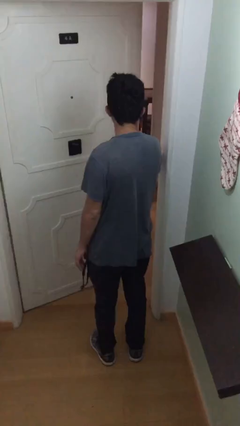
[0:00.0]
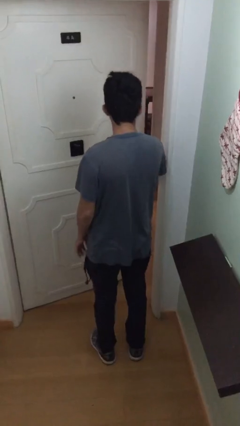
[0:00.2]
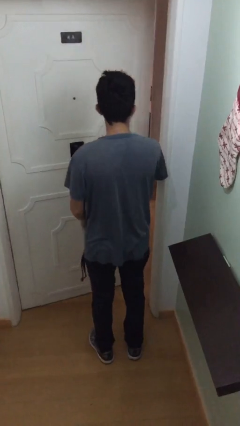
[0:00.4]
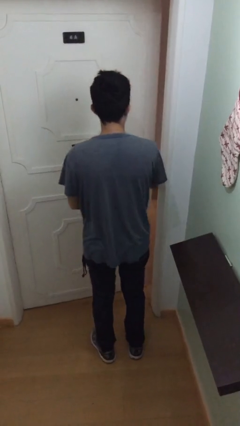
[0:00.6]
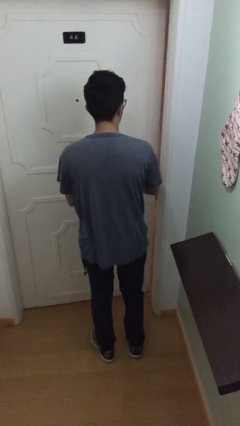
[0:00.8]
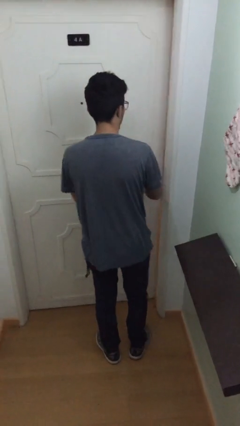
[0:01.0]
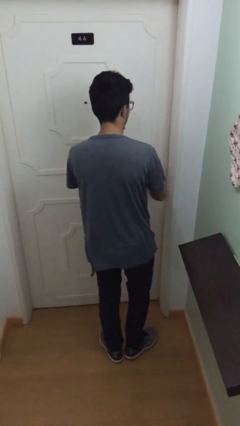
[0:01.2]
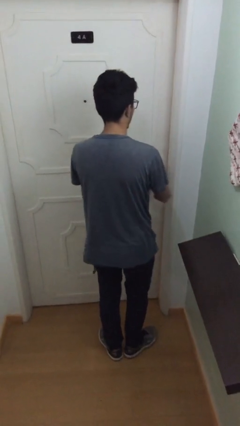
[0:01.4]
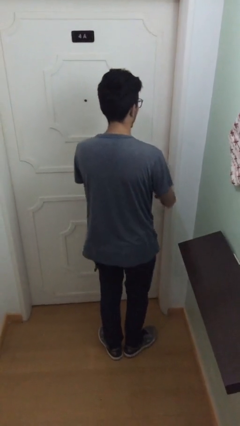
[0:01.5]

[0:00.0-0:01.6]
person closes facility door

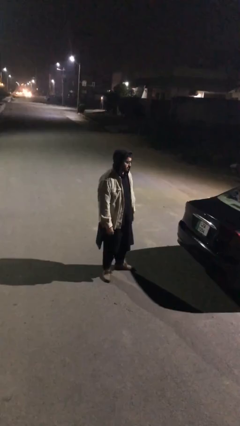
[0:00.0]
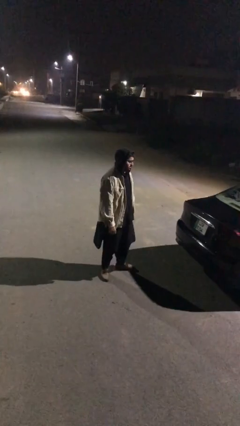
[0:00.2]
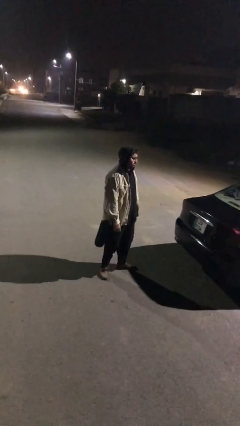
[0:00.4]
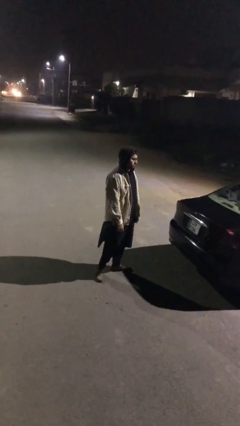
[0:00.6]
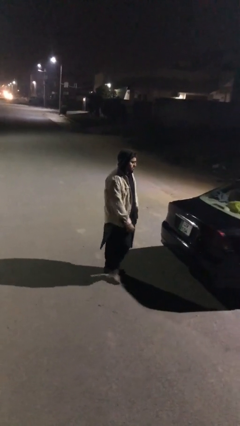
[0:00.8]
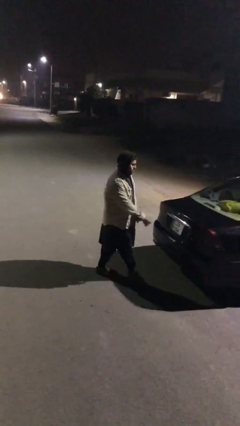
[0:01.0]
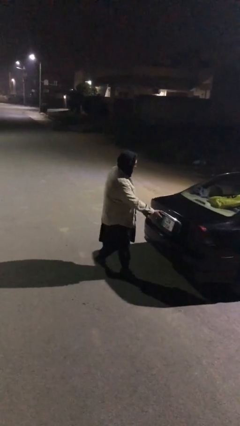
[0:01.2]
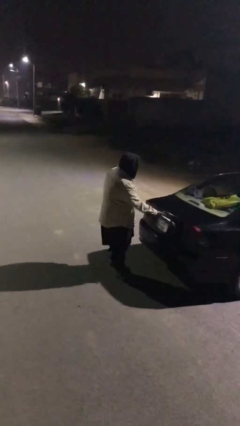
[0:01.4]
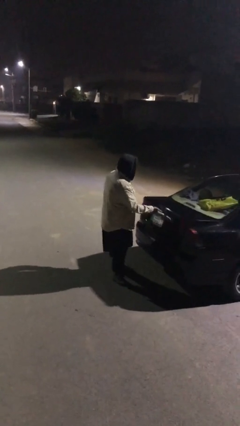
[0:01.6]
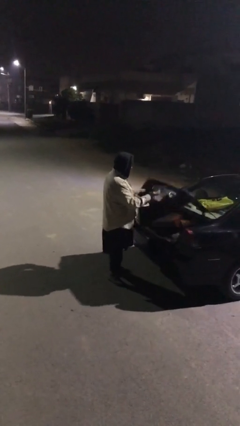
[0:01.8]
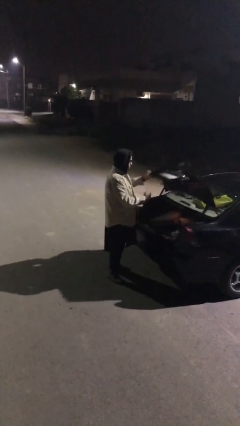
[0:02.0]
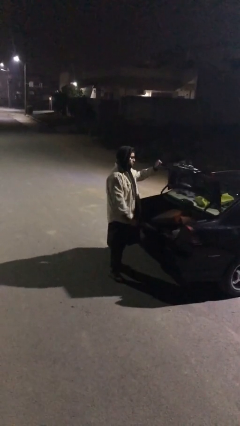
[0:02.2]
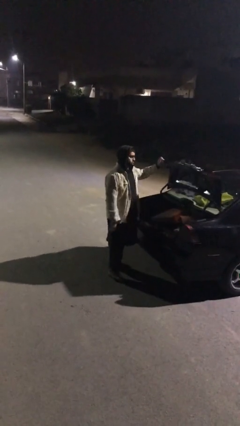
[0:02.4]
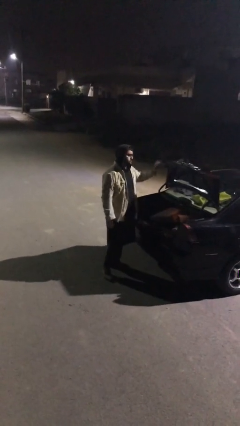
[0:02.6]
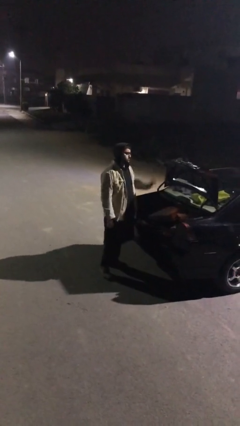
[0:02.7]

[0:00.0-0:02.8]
person opens car trunk

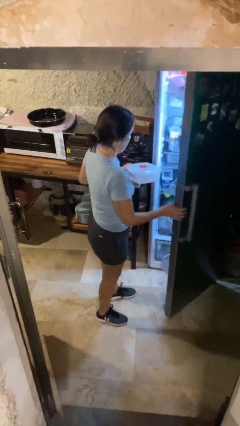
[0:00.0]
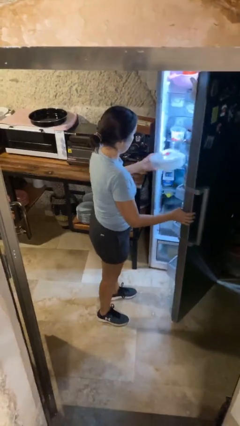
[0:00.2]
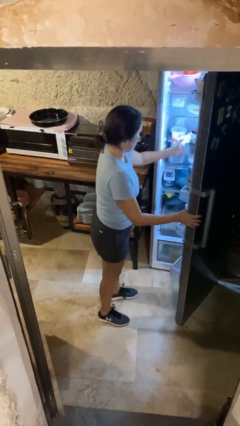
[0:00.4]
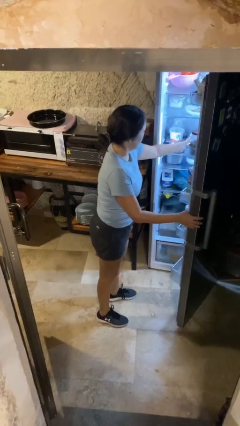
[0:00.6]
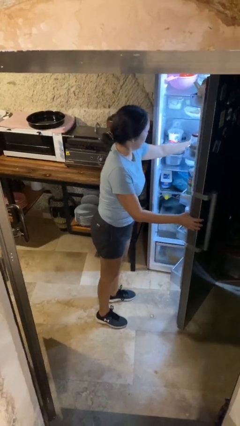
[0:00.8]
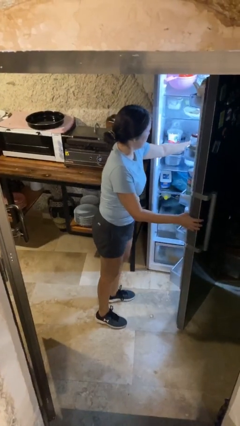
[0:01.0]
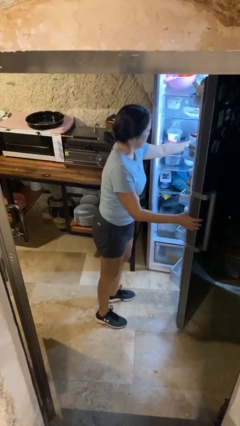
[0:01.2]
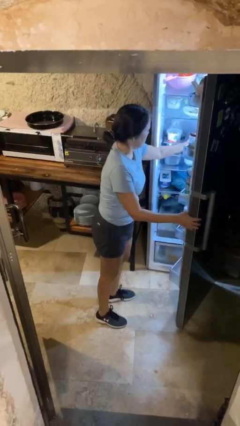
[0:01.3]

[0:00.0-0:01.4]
person puts object into refrigerator

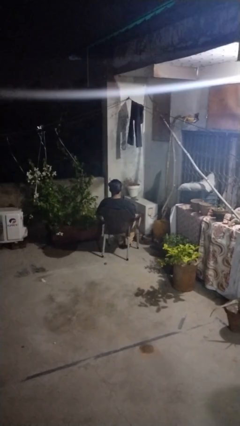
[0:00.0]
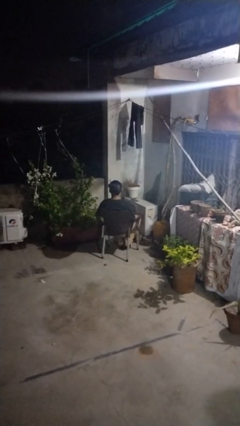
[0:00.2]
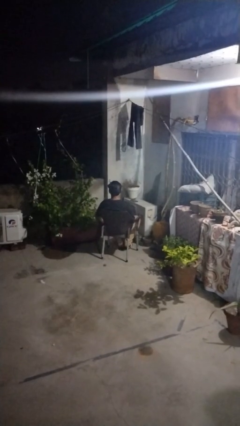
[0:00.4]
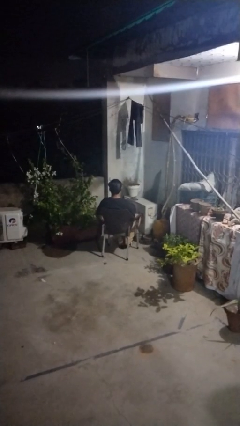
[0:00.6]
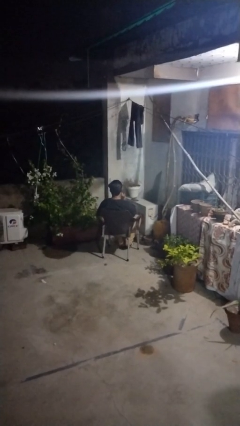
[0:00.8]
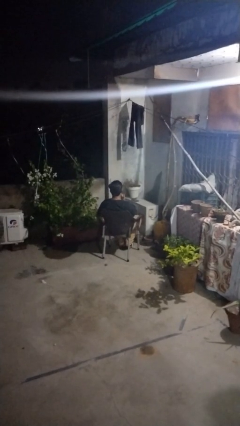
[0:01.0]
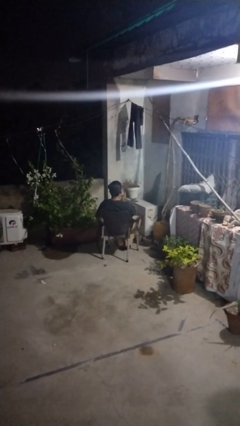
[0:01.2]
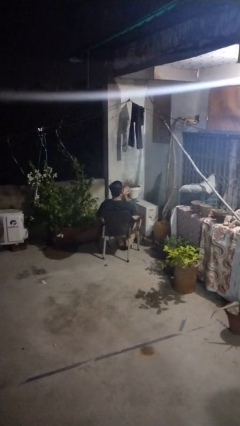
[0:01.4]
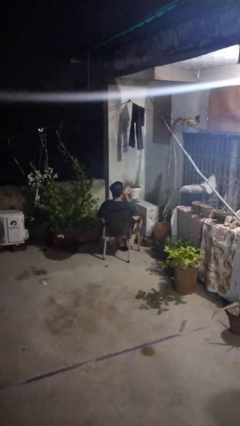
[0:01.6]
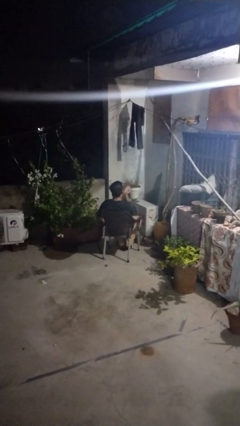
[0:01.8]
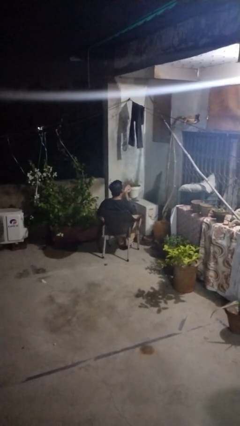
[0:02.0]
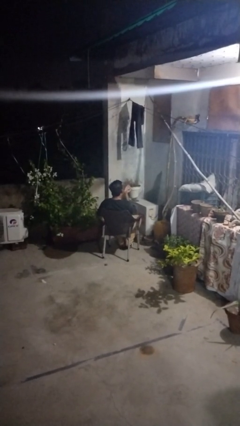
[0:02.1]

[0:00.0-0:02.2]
person gestures blow kiss

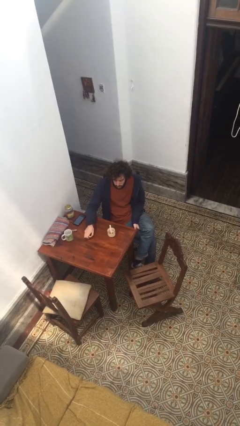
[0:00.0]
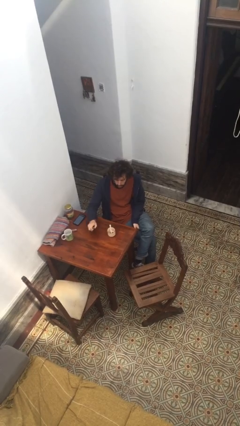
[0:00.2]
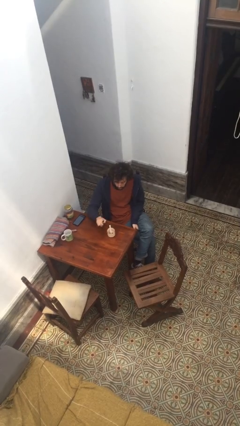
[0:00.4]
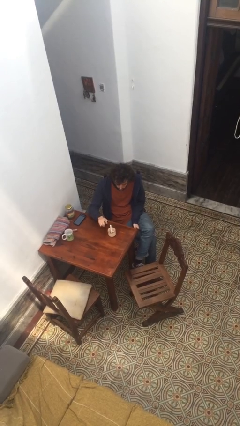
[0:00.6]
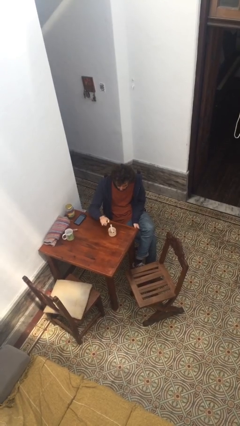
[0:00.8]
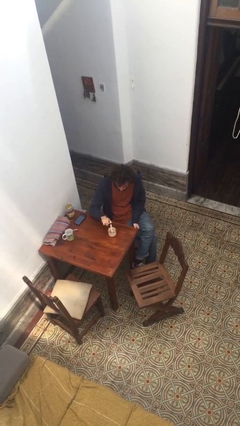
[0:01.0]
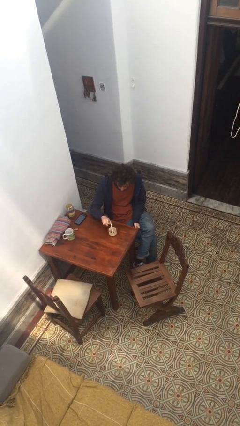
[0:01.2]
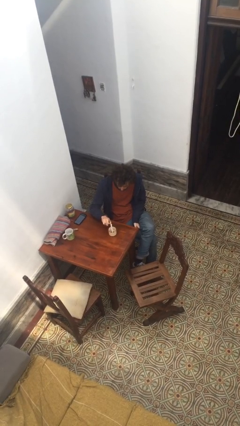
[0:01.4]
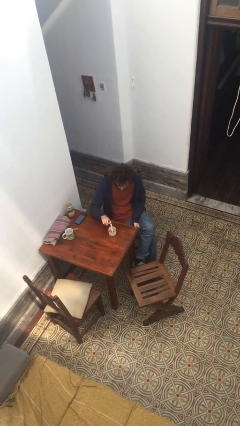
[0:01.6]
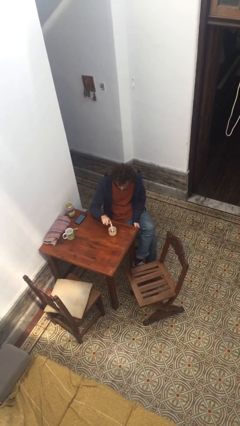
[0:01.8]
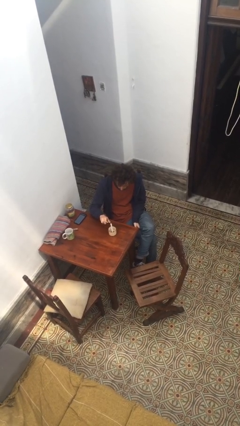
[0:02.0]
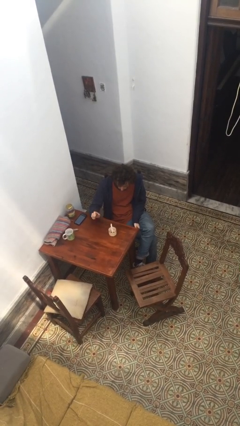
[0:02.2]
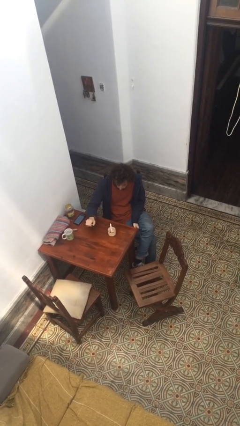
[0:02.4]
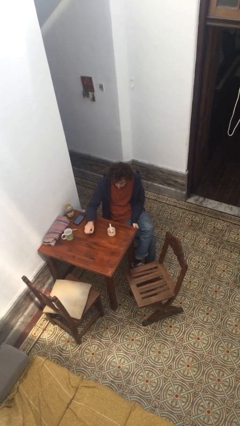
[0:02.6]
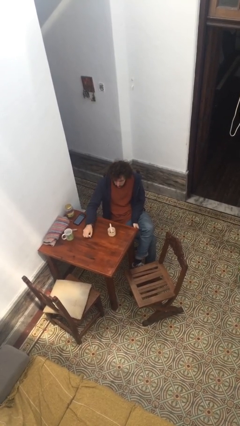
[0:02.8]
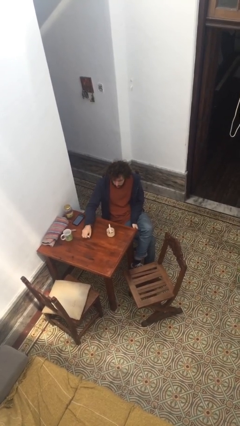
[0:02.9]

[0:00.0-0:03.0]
person lights candle

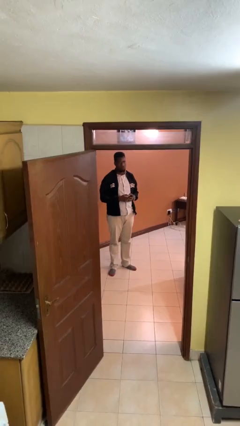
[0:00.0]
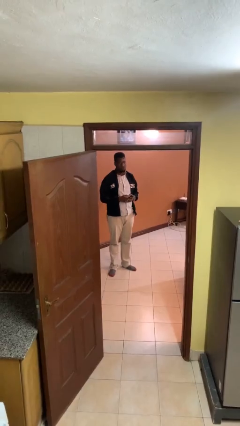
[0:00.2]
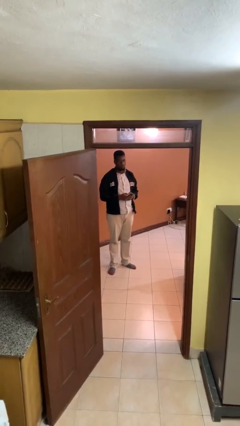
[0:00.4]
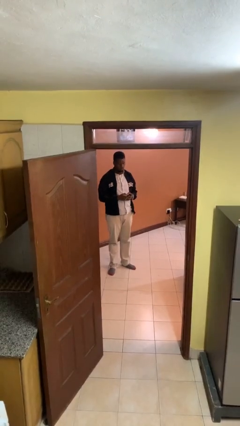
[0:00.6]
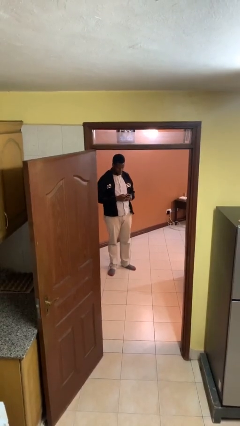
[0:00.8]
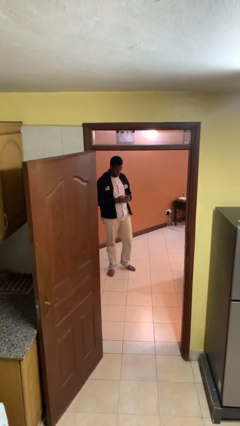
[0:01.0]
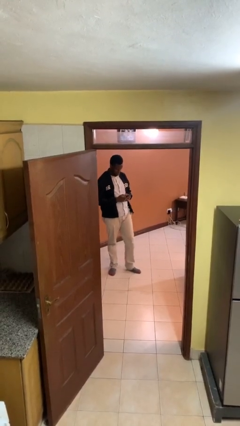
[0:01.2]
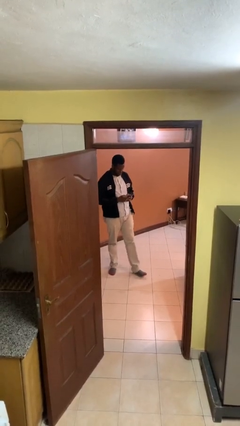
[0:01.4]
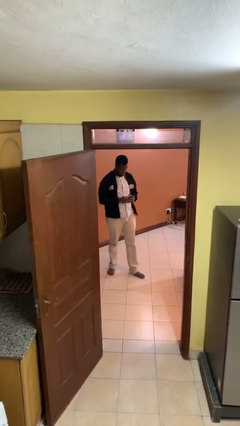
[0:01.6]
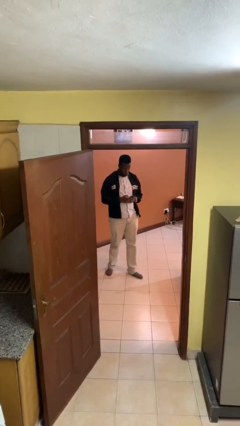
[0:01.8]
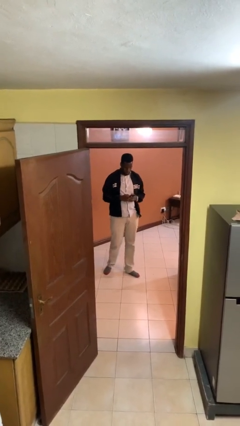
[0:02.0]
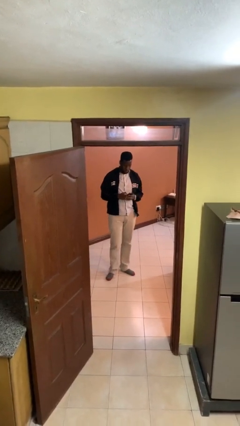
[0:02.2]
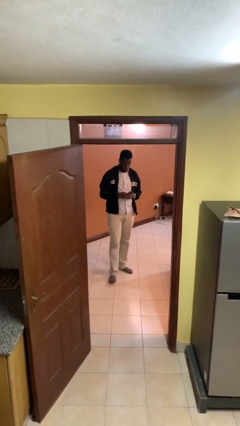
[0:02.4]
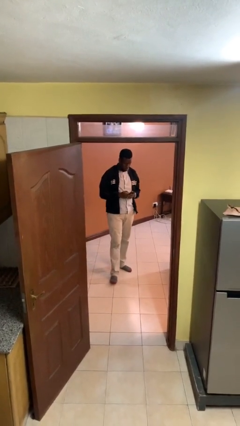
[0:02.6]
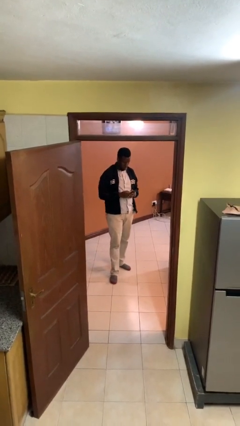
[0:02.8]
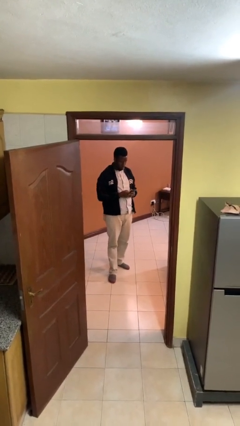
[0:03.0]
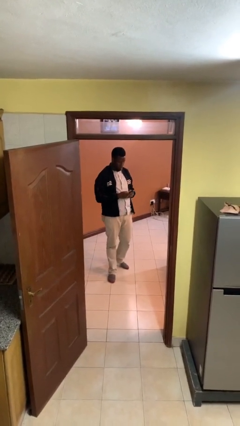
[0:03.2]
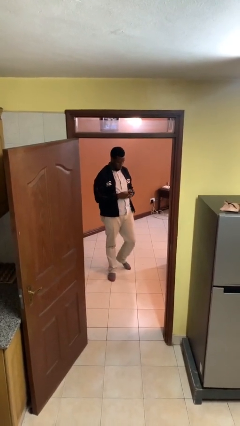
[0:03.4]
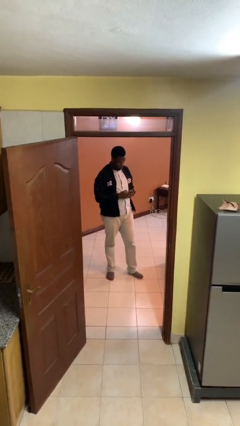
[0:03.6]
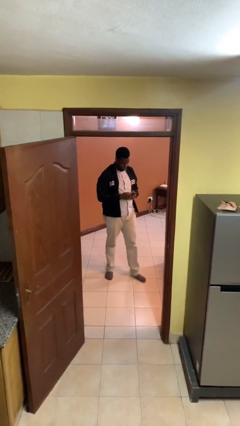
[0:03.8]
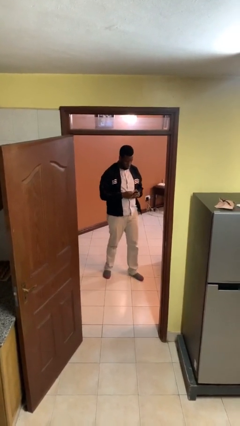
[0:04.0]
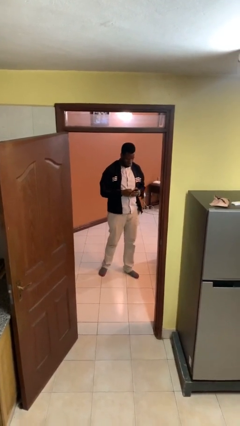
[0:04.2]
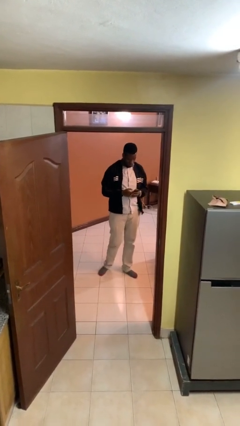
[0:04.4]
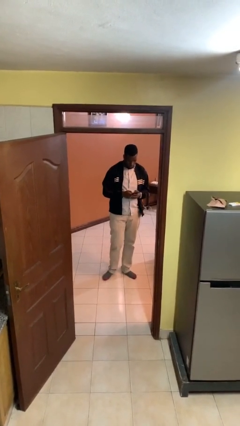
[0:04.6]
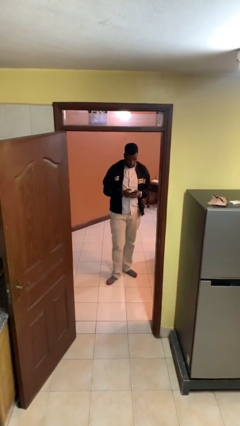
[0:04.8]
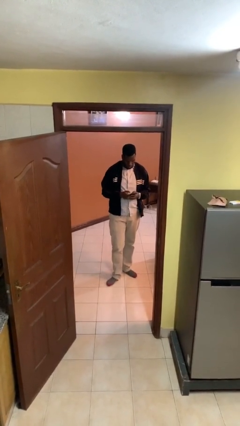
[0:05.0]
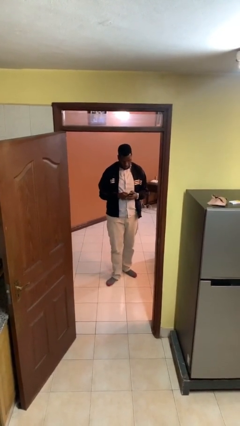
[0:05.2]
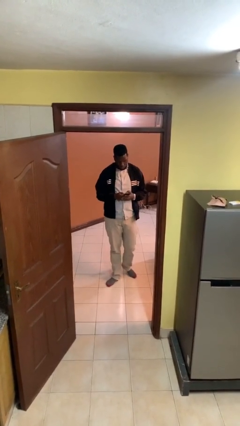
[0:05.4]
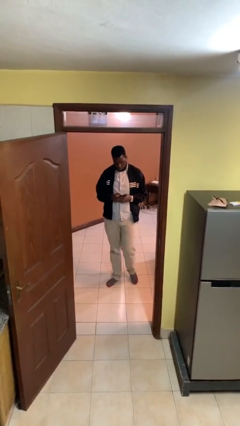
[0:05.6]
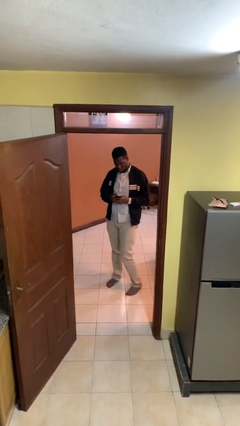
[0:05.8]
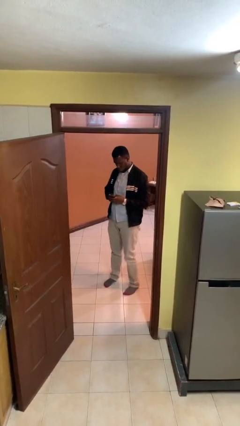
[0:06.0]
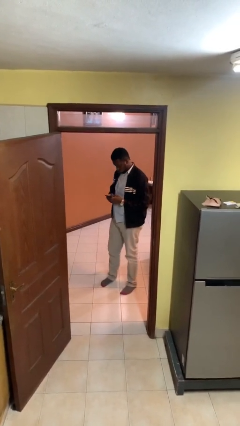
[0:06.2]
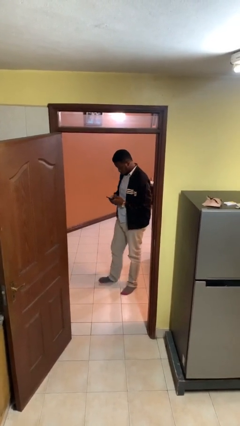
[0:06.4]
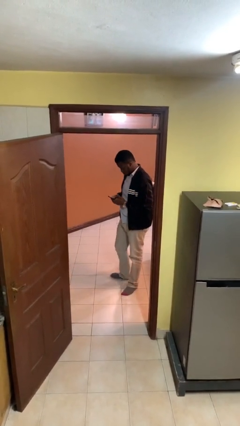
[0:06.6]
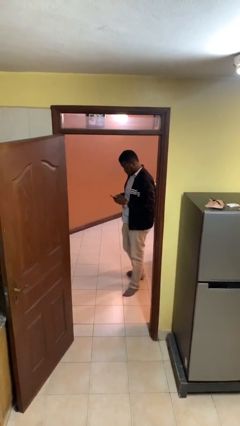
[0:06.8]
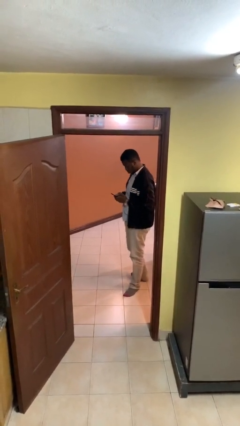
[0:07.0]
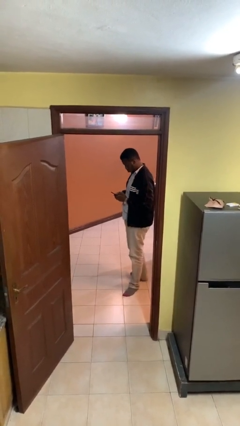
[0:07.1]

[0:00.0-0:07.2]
person texts on phone
